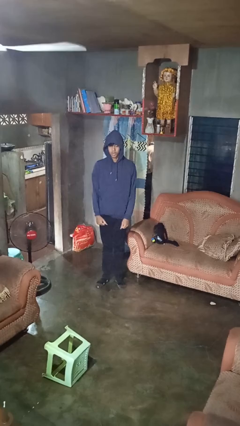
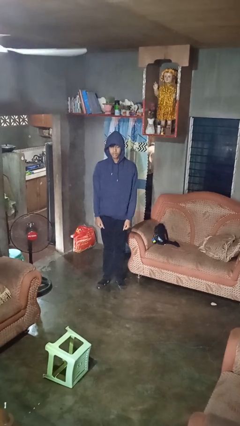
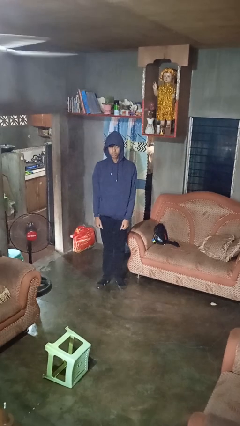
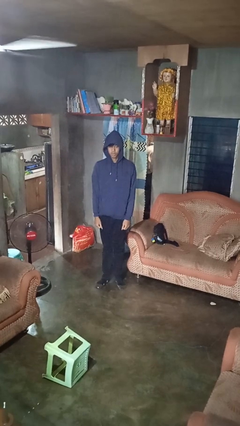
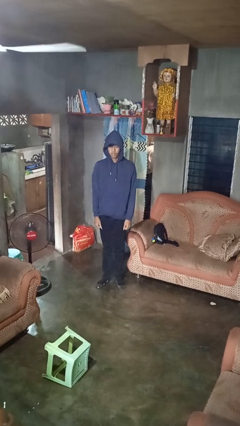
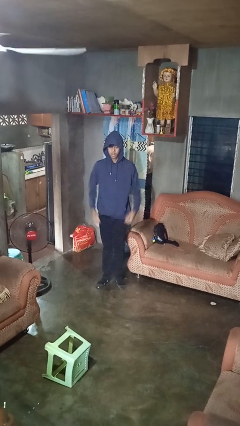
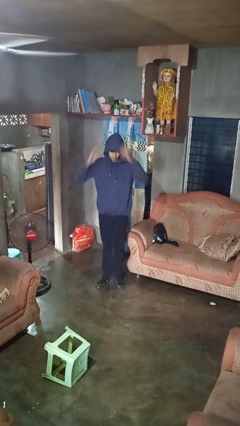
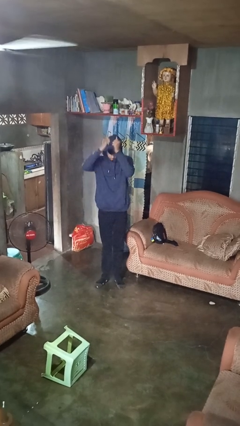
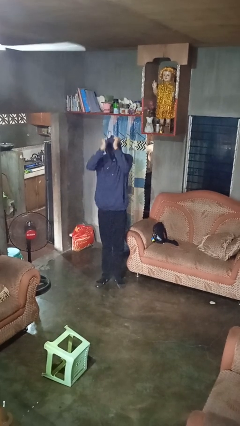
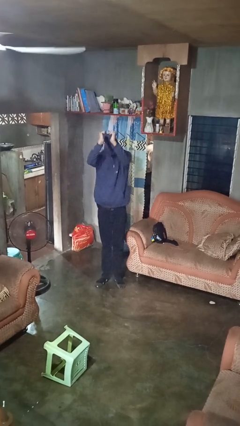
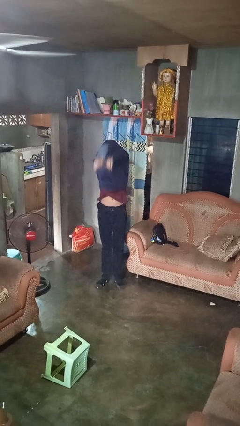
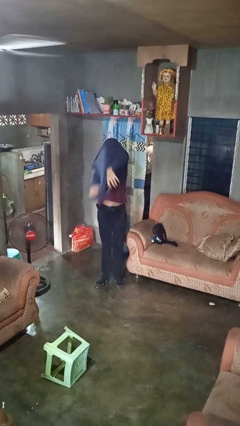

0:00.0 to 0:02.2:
person takes off hoodie

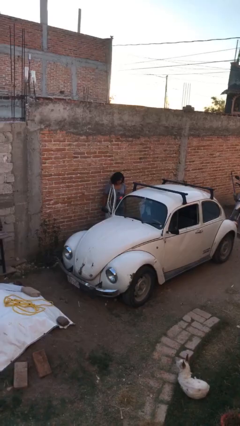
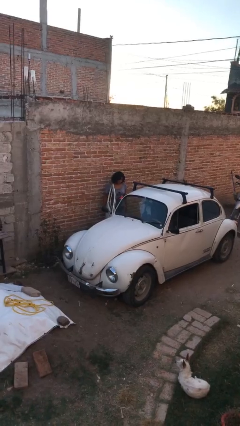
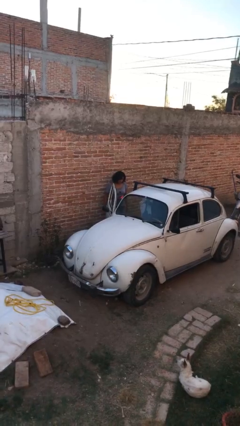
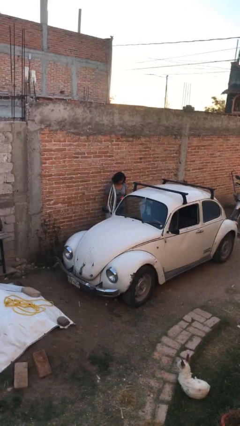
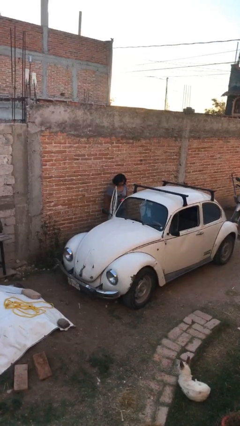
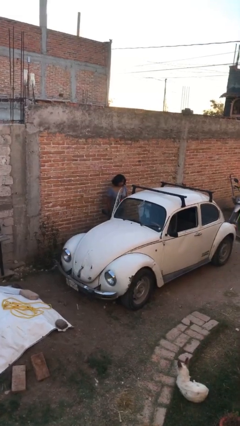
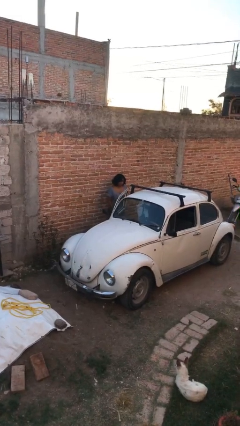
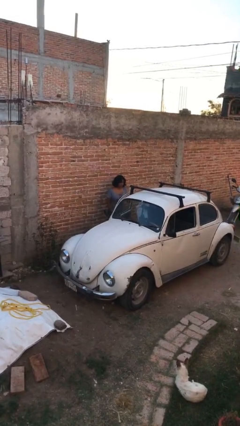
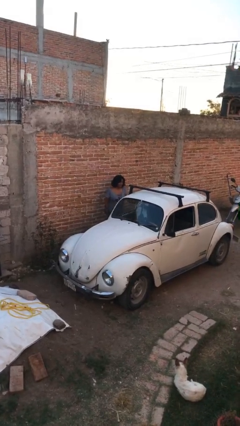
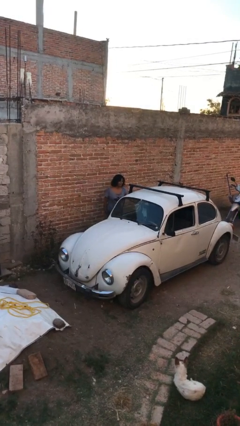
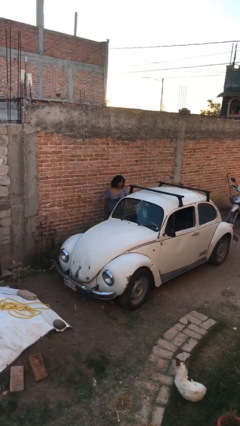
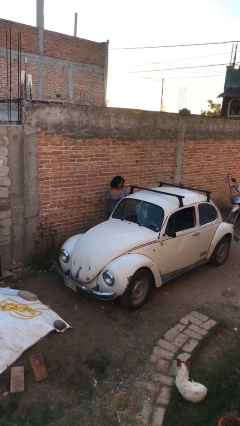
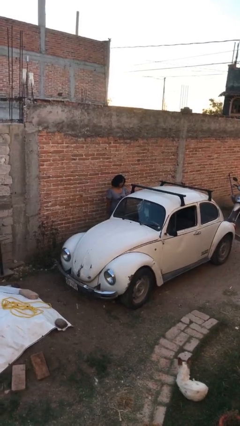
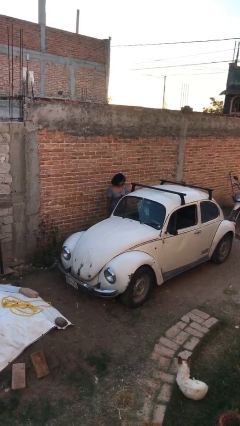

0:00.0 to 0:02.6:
person closes car door

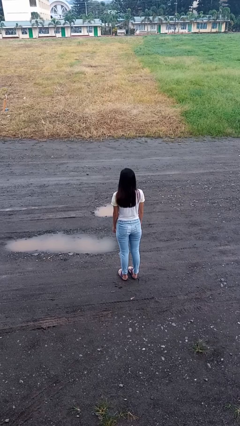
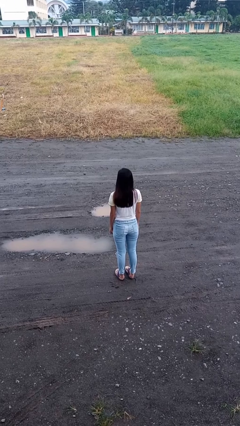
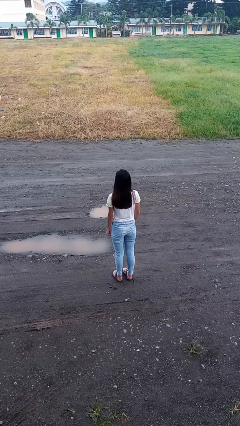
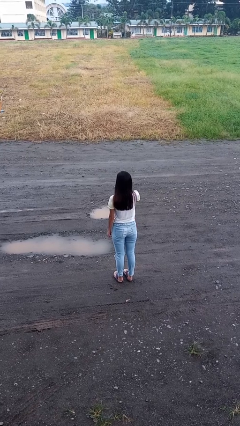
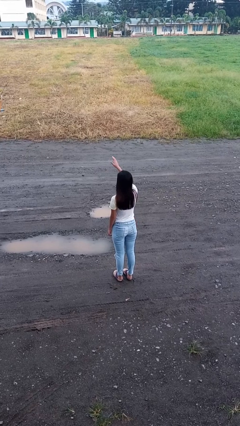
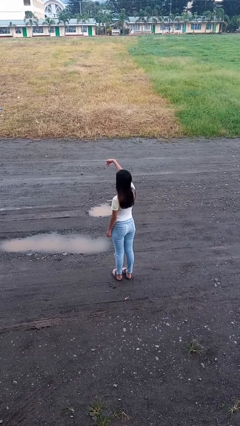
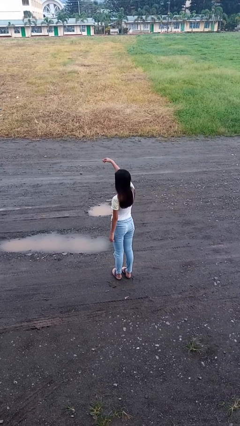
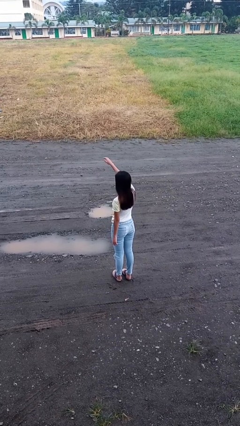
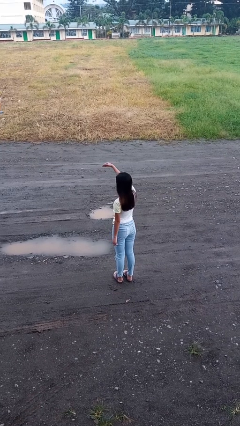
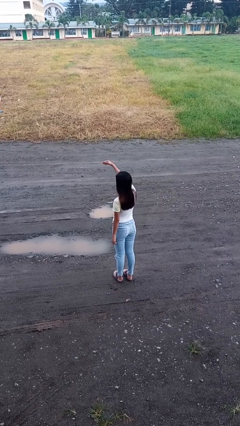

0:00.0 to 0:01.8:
person gestures come here

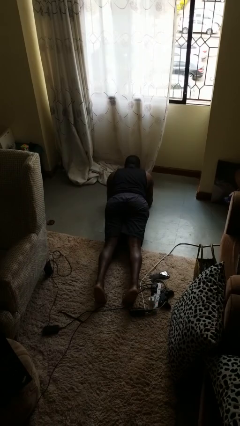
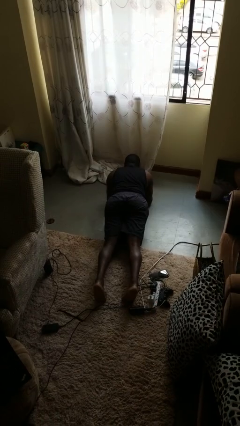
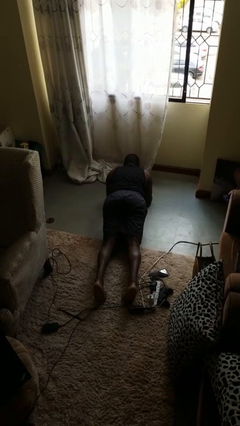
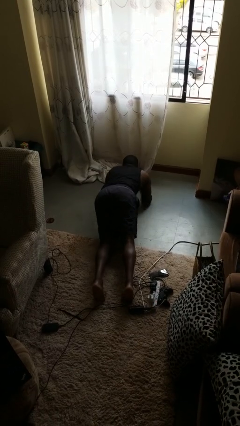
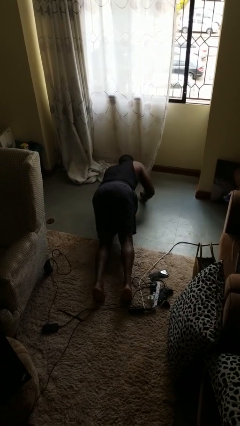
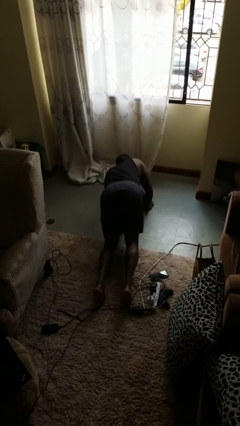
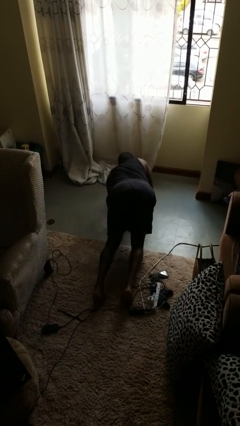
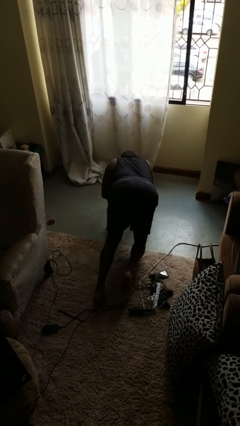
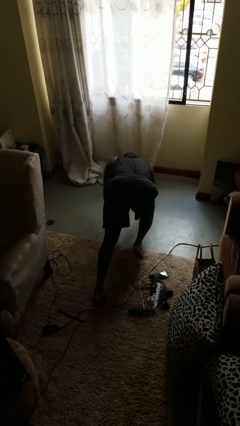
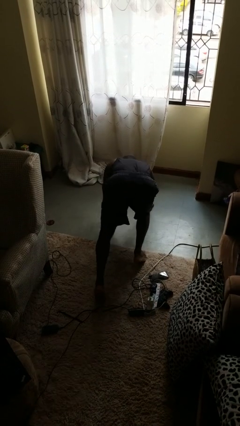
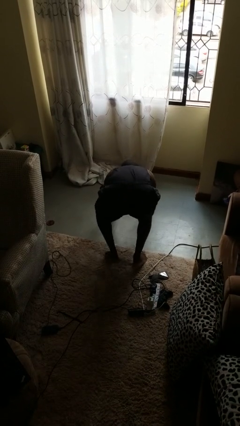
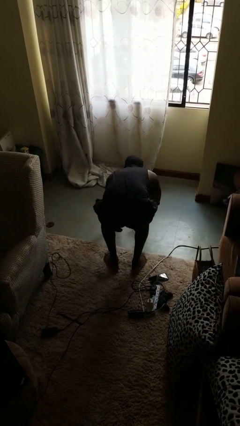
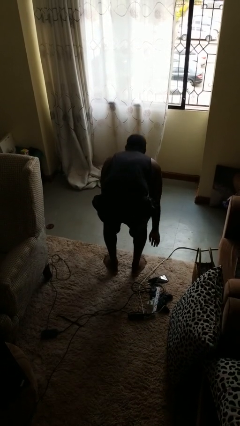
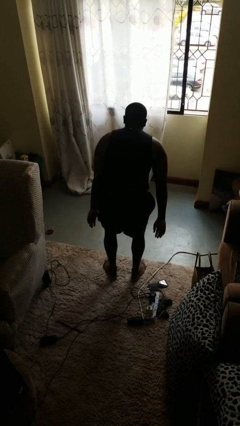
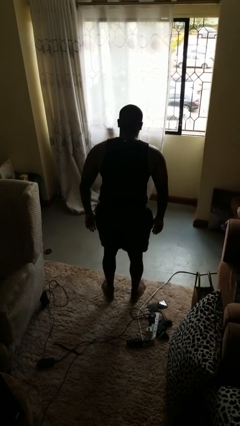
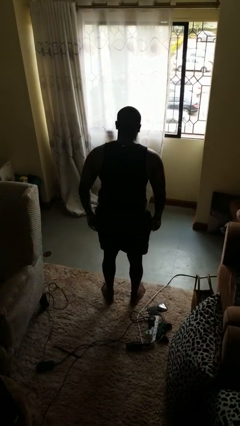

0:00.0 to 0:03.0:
person stands up from floor

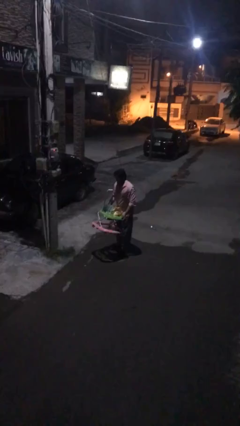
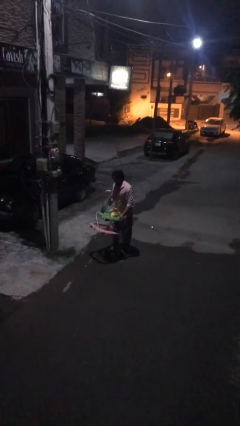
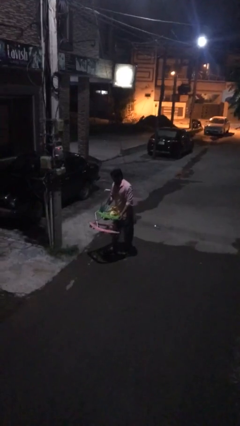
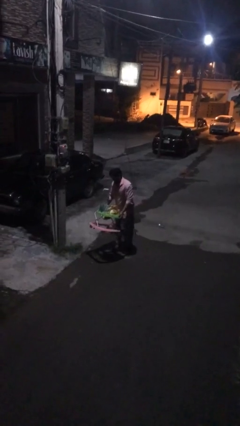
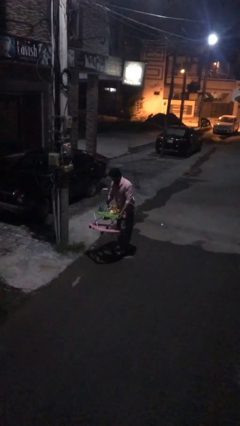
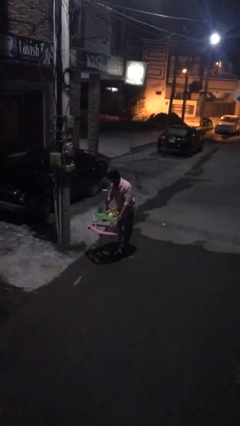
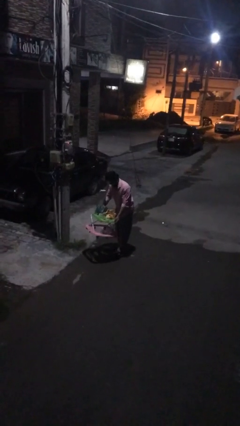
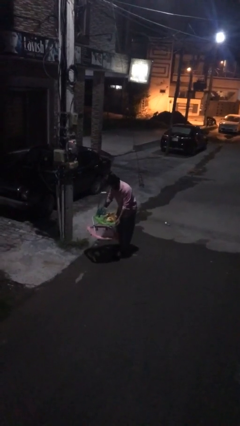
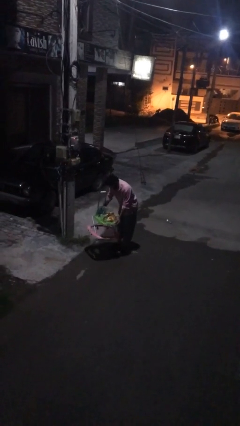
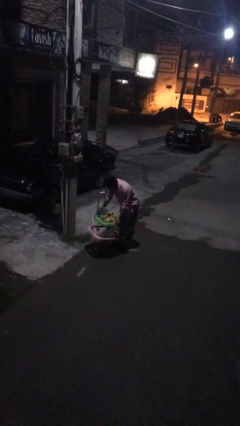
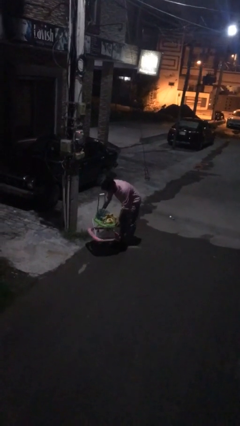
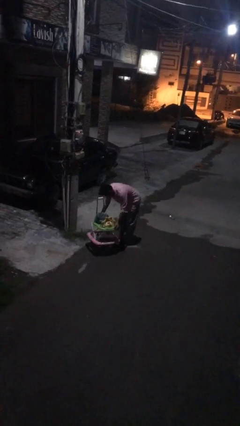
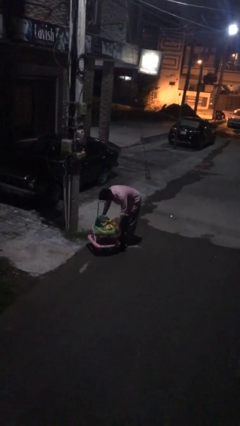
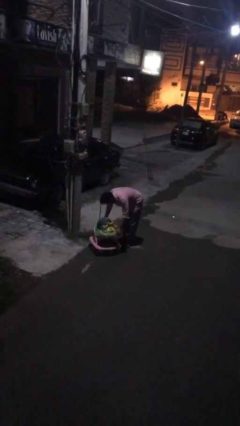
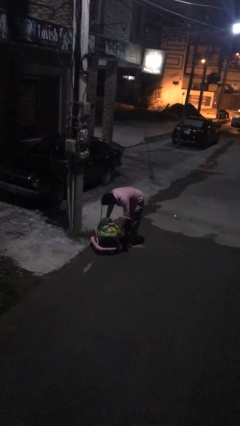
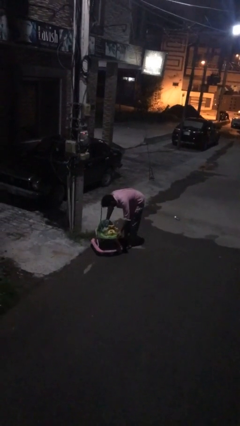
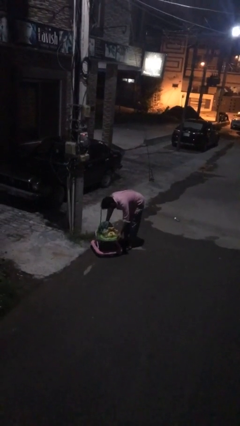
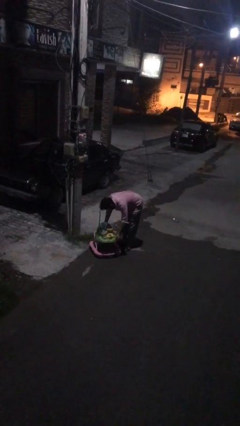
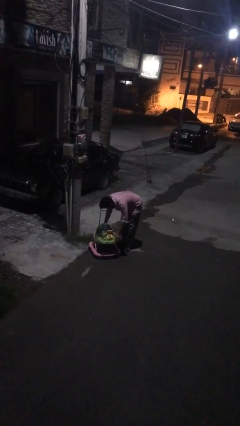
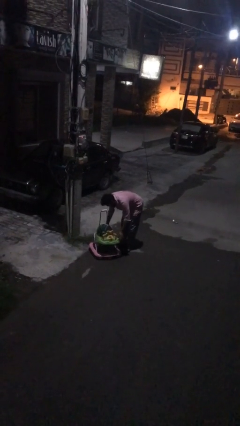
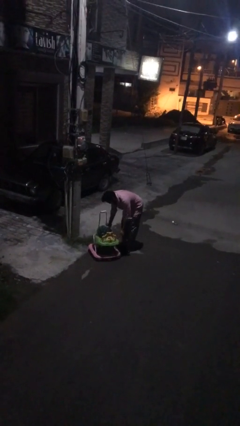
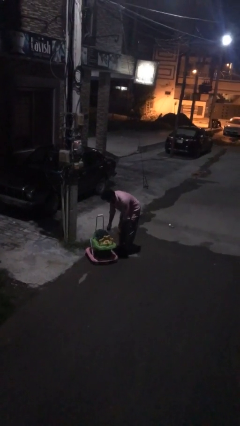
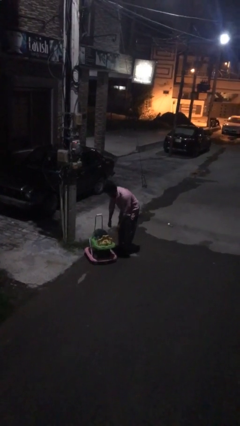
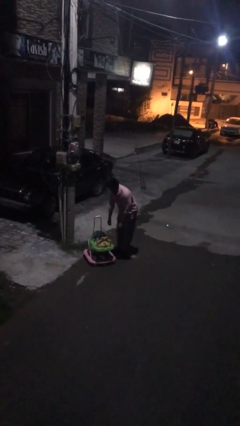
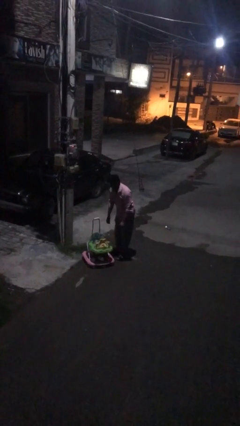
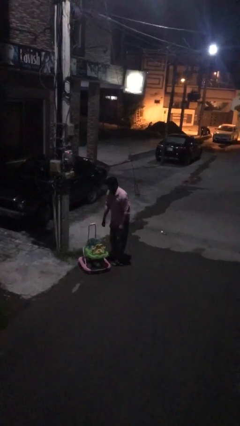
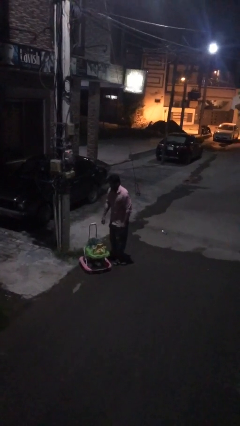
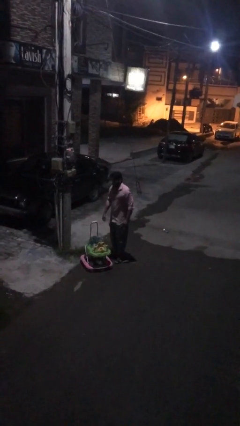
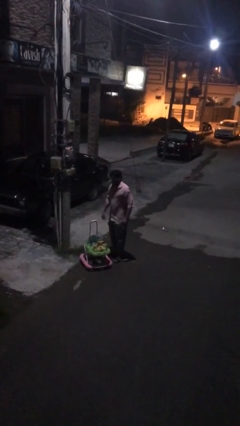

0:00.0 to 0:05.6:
person puts down object on floor

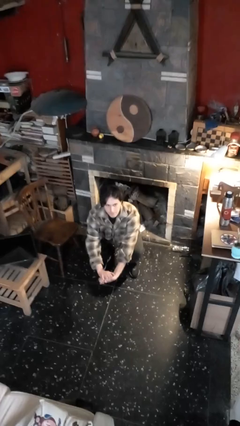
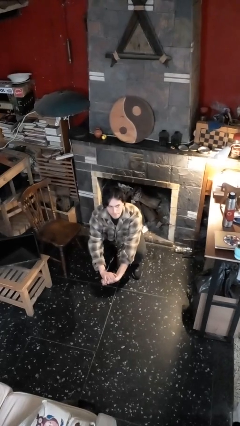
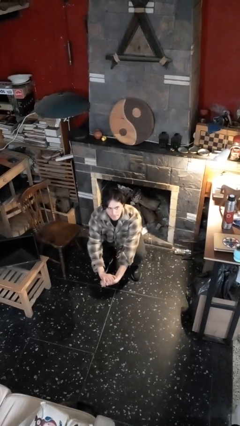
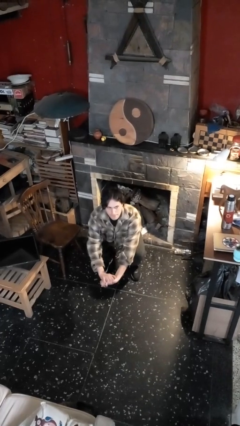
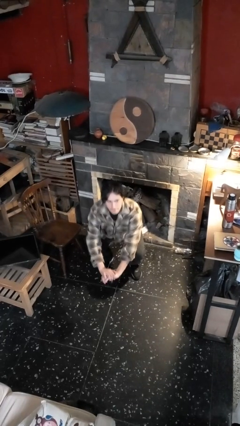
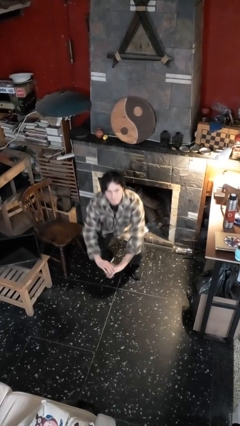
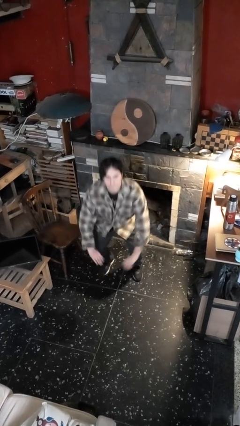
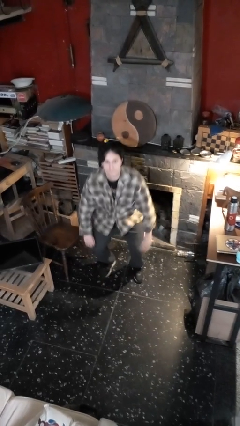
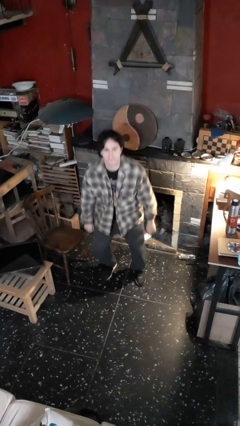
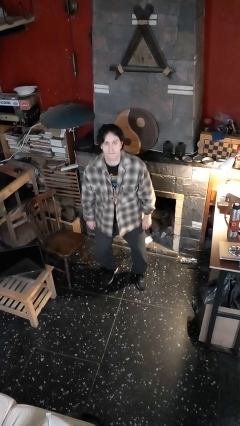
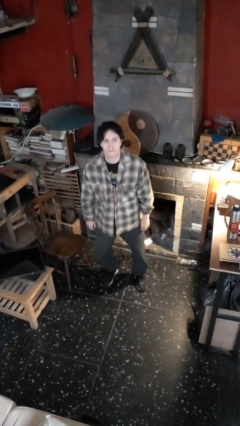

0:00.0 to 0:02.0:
person stands up
